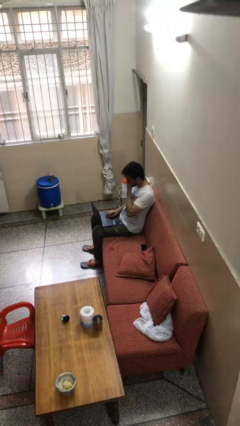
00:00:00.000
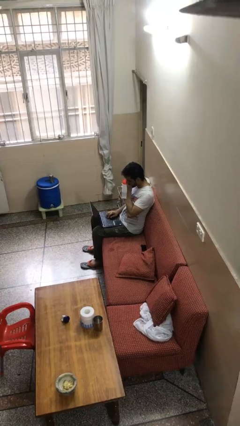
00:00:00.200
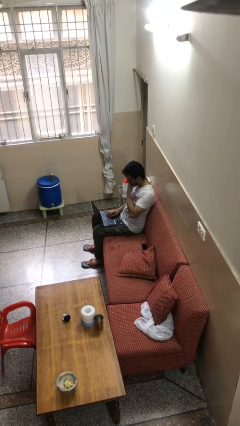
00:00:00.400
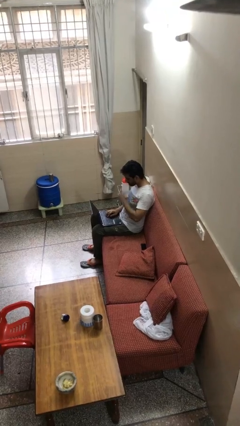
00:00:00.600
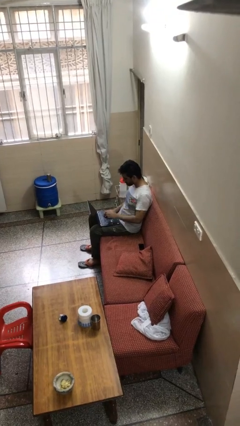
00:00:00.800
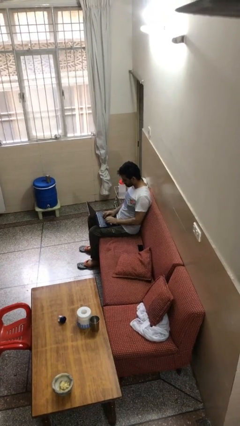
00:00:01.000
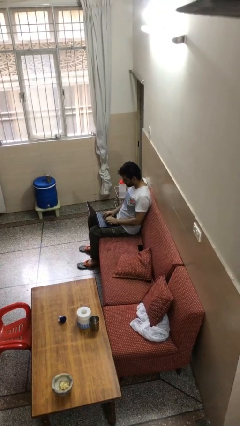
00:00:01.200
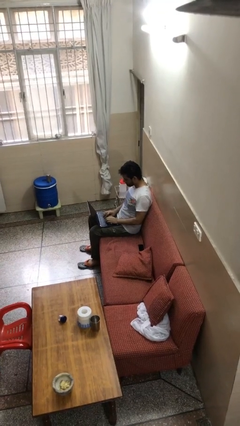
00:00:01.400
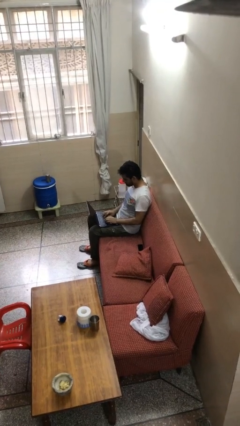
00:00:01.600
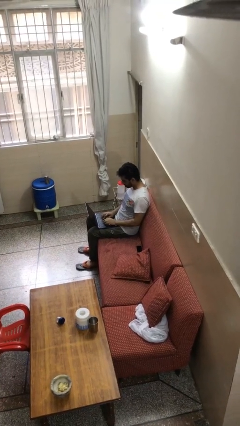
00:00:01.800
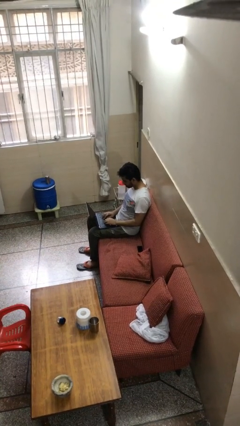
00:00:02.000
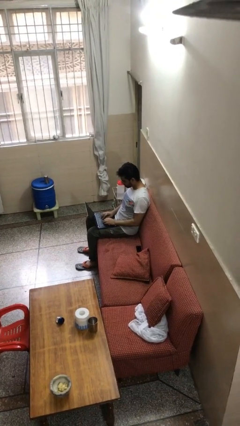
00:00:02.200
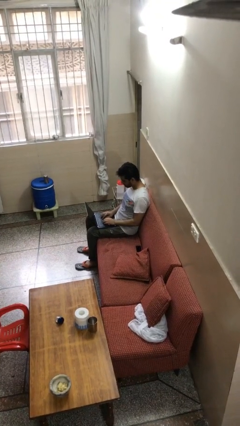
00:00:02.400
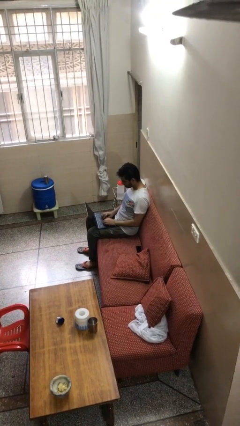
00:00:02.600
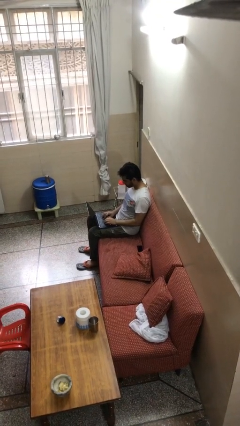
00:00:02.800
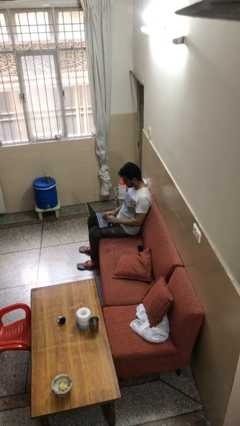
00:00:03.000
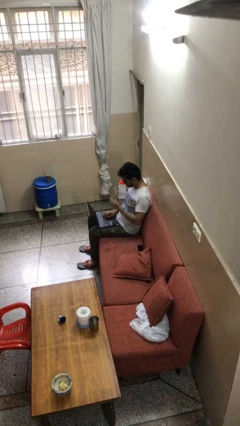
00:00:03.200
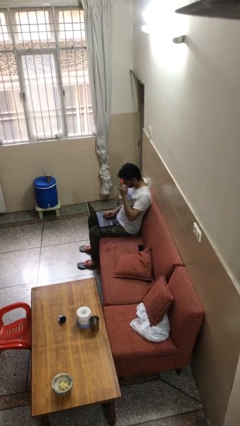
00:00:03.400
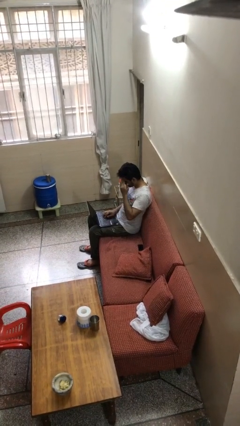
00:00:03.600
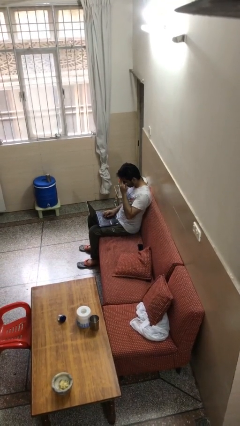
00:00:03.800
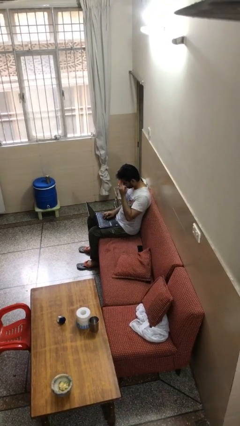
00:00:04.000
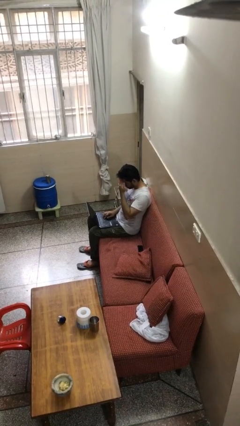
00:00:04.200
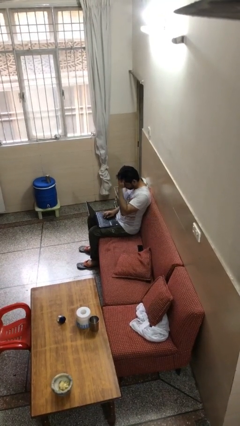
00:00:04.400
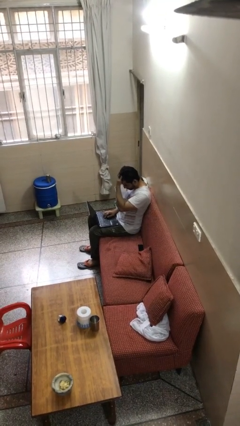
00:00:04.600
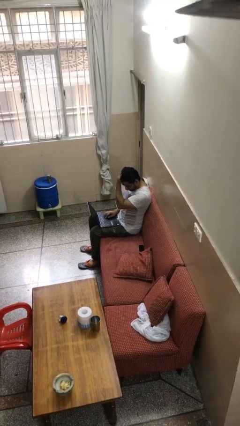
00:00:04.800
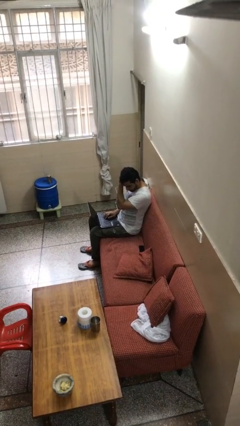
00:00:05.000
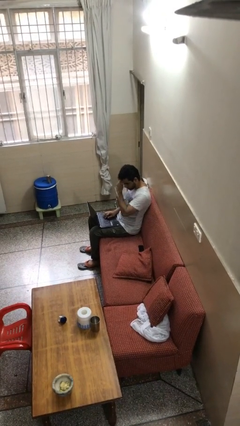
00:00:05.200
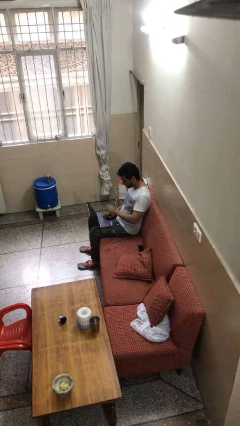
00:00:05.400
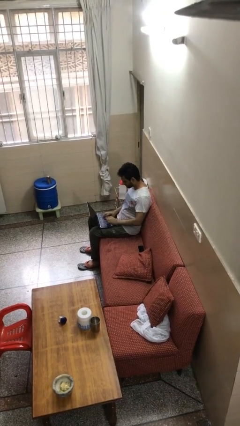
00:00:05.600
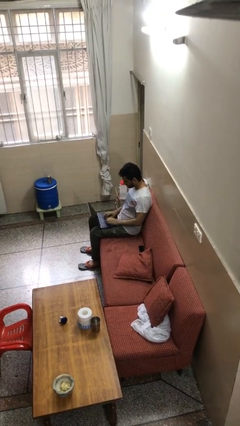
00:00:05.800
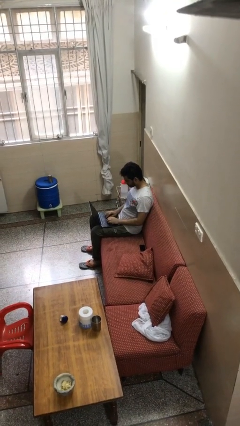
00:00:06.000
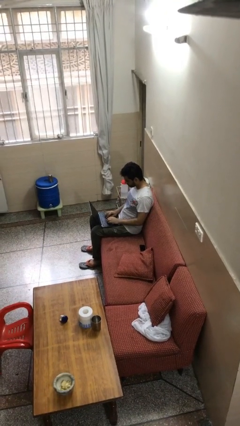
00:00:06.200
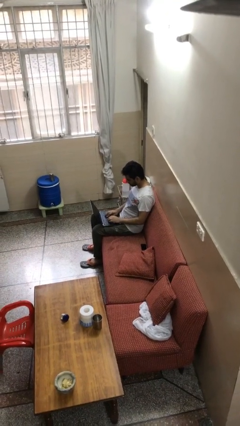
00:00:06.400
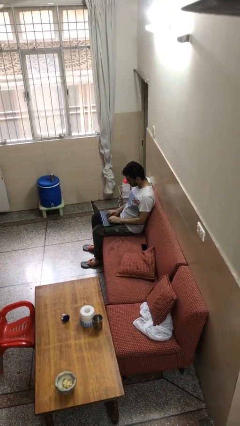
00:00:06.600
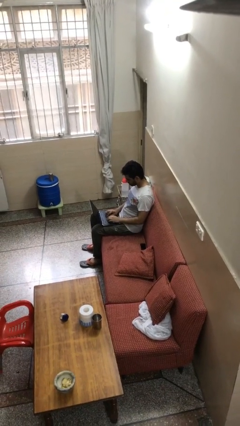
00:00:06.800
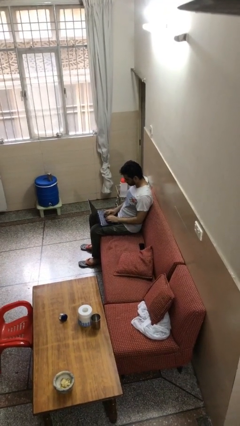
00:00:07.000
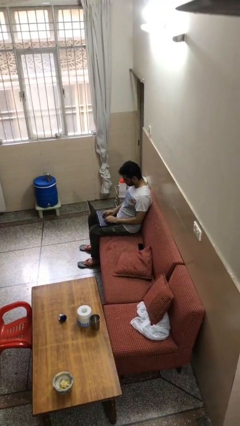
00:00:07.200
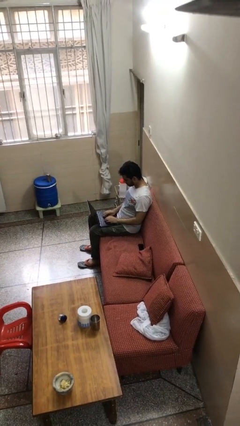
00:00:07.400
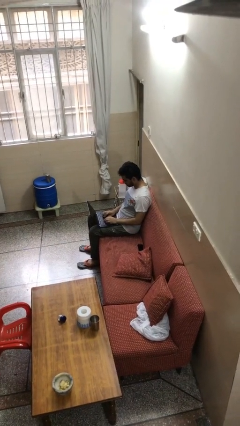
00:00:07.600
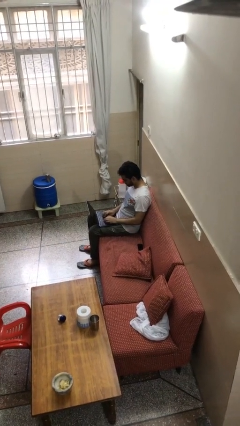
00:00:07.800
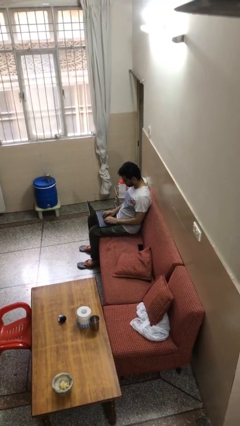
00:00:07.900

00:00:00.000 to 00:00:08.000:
person interacts with laptop

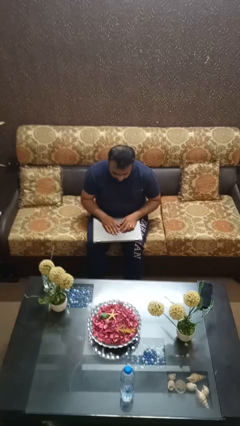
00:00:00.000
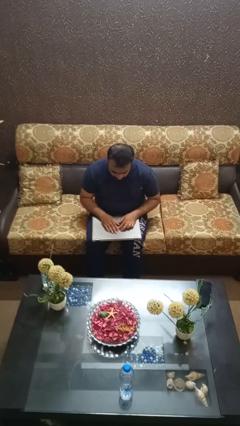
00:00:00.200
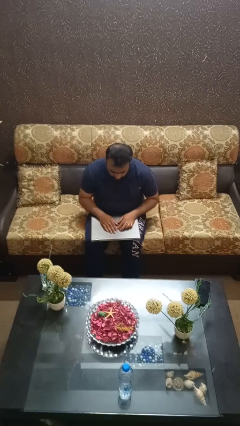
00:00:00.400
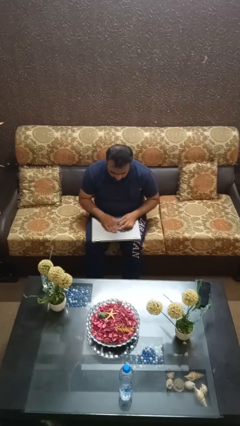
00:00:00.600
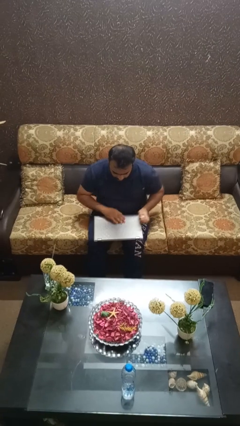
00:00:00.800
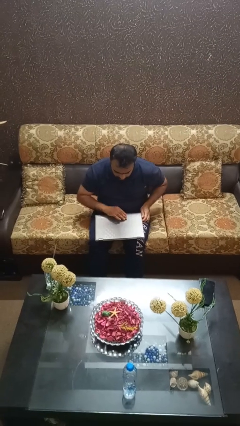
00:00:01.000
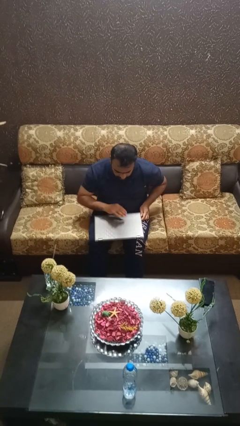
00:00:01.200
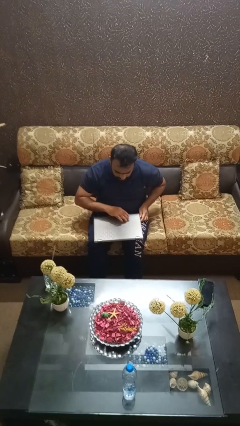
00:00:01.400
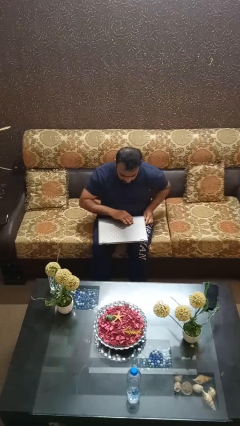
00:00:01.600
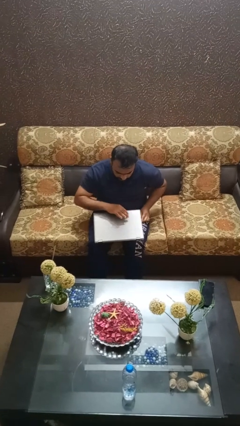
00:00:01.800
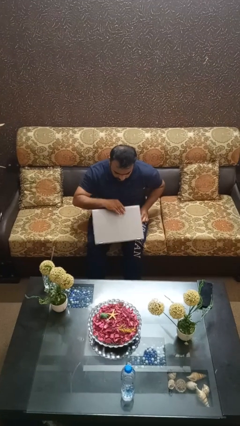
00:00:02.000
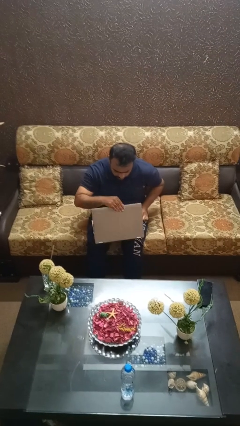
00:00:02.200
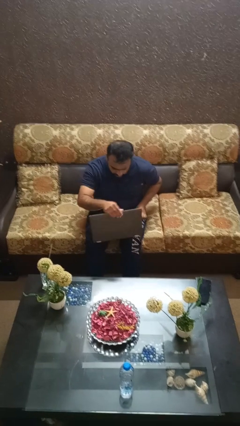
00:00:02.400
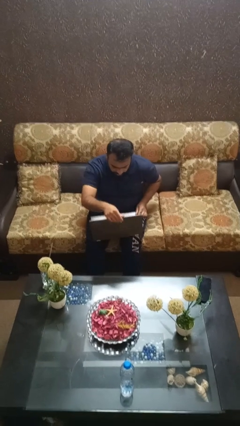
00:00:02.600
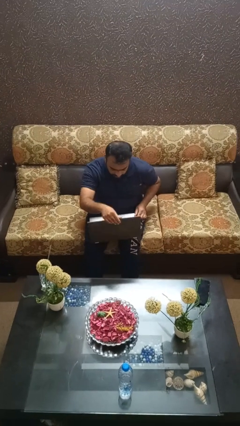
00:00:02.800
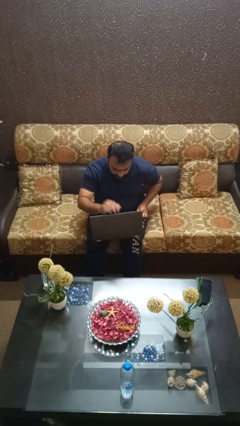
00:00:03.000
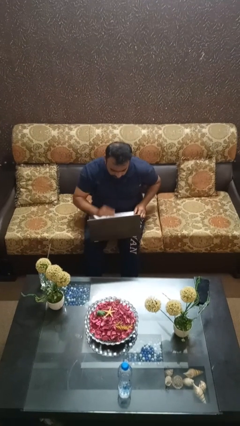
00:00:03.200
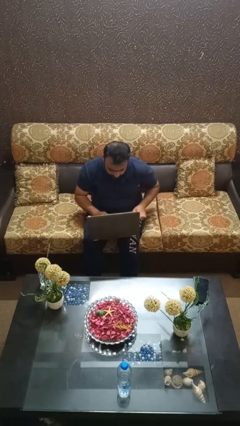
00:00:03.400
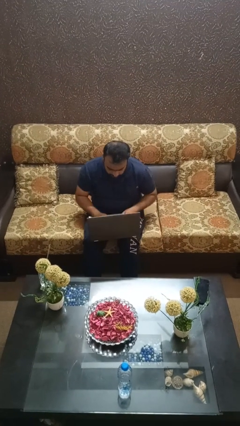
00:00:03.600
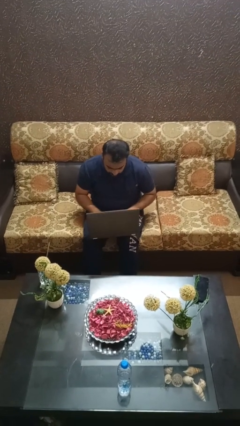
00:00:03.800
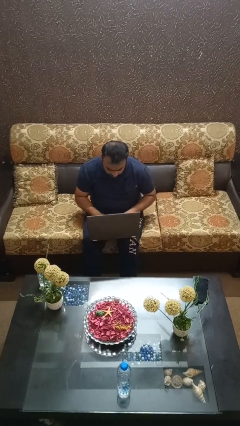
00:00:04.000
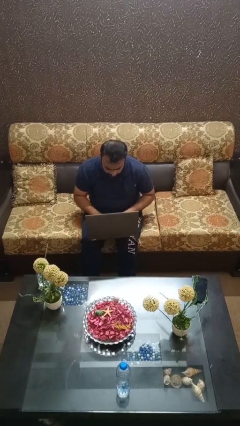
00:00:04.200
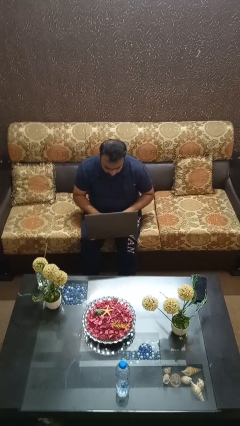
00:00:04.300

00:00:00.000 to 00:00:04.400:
person opens laptop

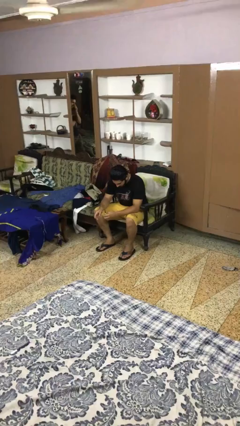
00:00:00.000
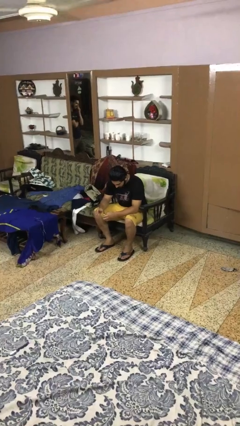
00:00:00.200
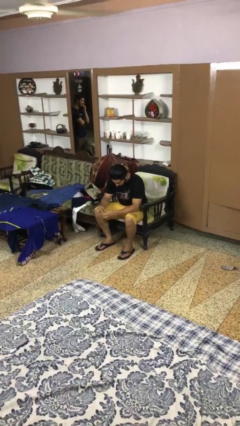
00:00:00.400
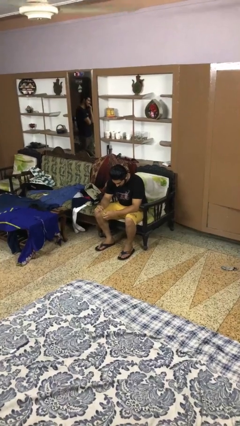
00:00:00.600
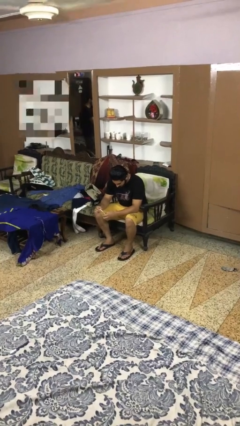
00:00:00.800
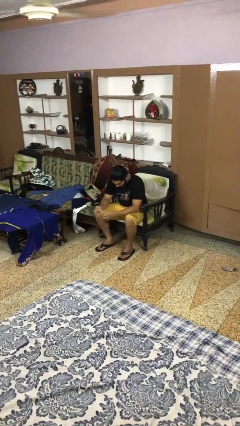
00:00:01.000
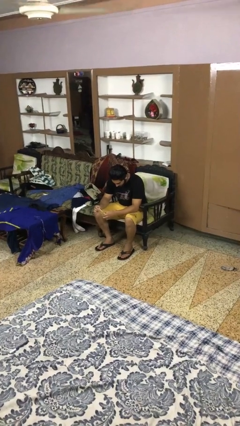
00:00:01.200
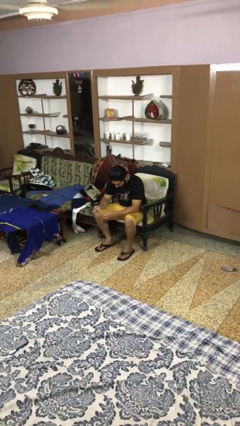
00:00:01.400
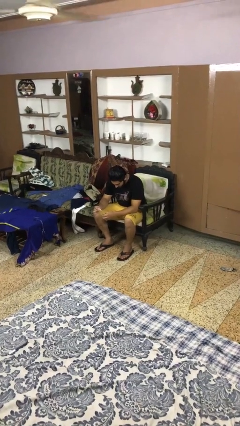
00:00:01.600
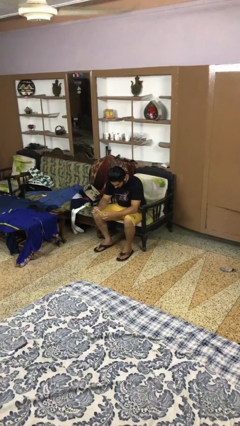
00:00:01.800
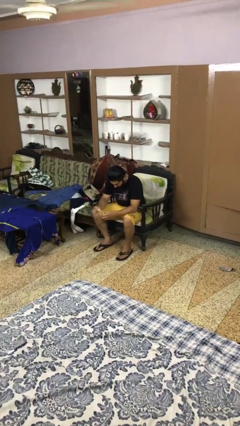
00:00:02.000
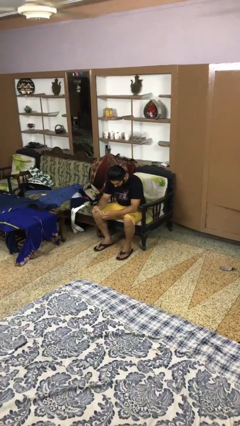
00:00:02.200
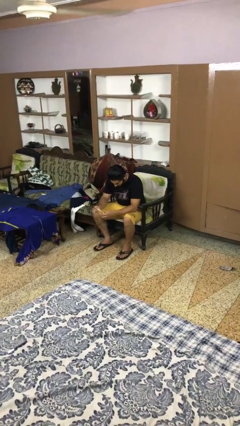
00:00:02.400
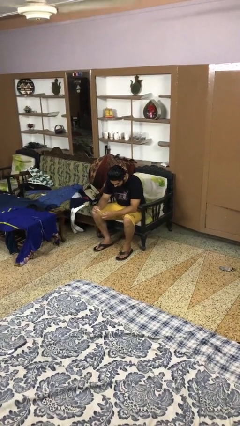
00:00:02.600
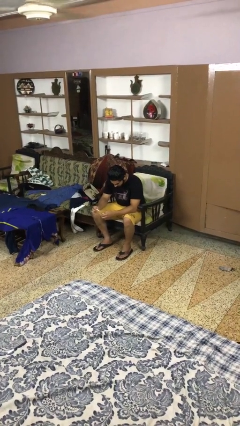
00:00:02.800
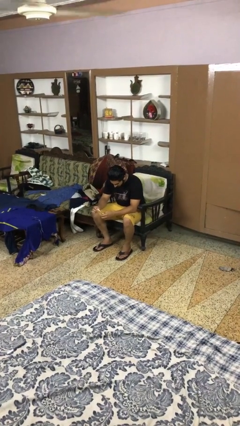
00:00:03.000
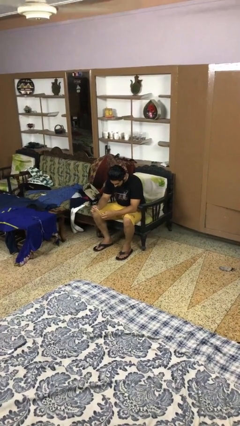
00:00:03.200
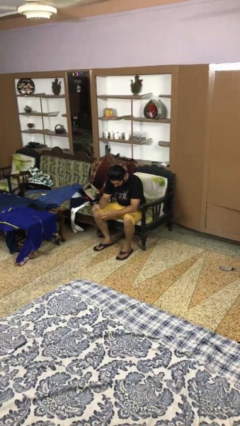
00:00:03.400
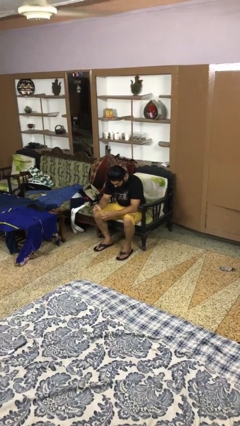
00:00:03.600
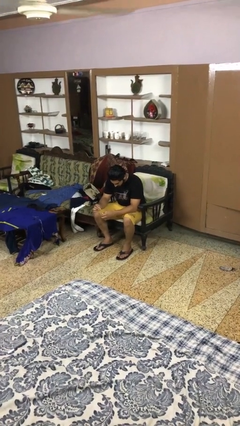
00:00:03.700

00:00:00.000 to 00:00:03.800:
person paints fingernails

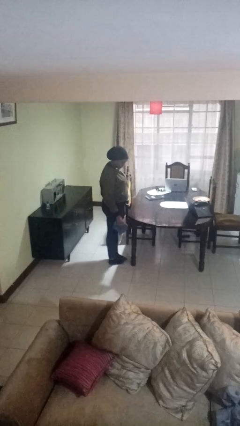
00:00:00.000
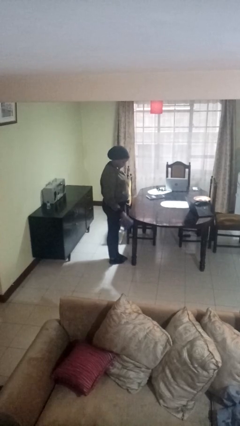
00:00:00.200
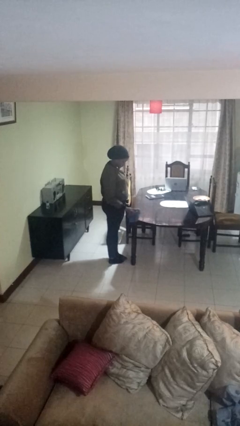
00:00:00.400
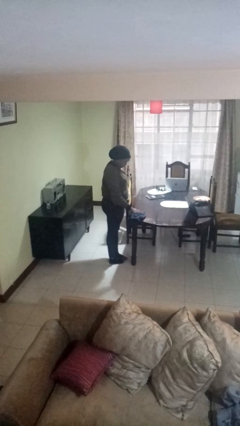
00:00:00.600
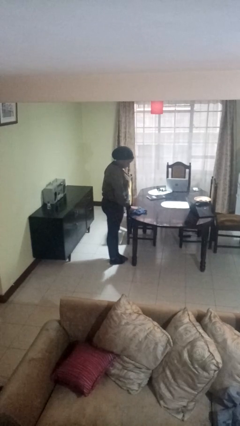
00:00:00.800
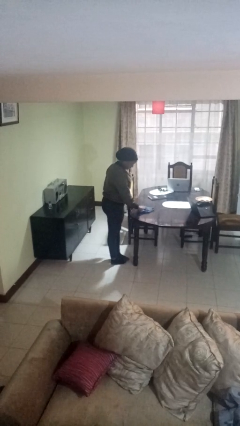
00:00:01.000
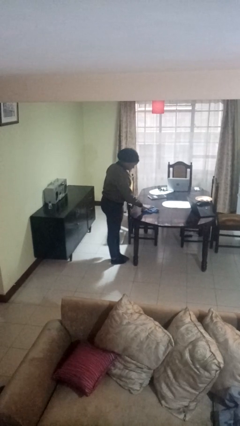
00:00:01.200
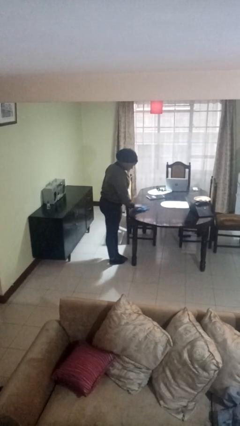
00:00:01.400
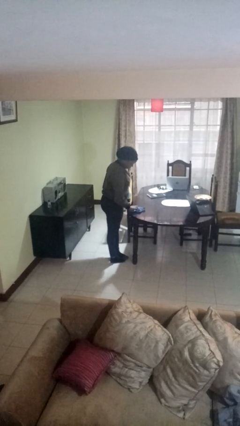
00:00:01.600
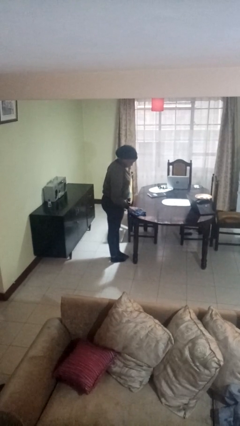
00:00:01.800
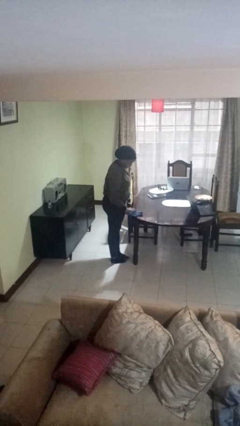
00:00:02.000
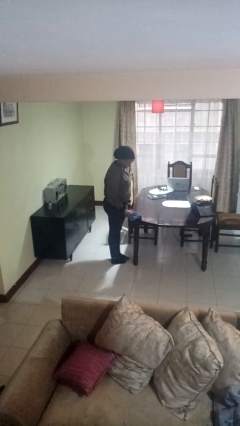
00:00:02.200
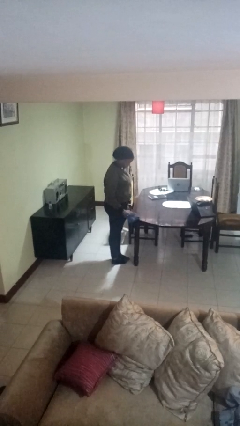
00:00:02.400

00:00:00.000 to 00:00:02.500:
person cleans table with rag
